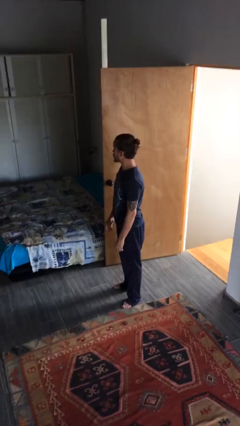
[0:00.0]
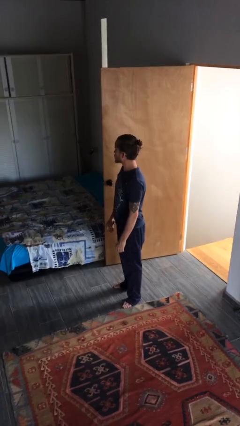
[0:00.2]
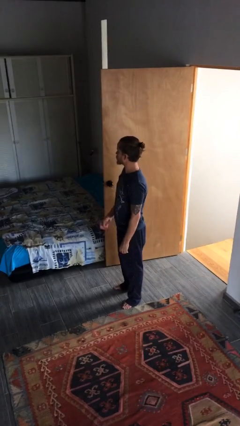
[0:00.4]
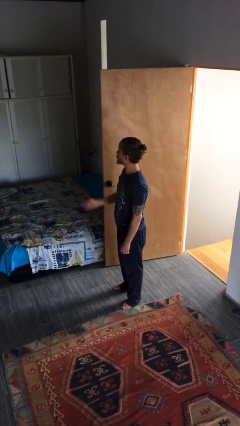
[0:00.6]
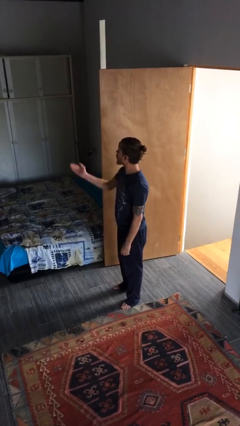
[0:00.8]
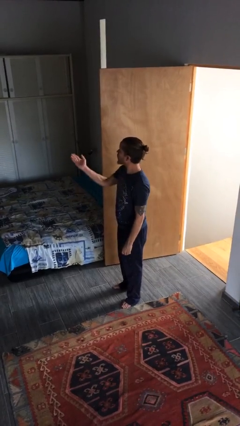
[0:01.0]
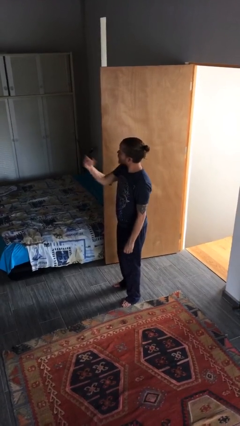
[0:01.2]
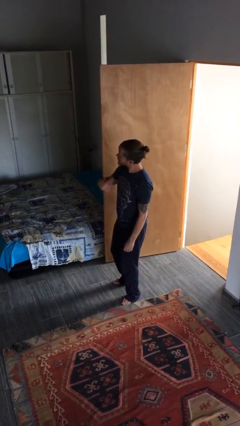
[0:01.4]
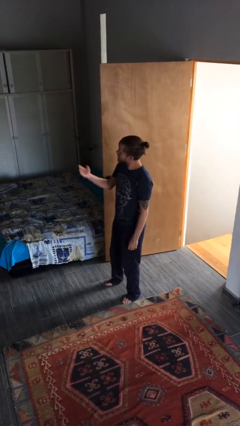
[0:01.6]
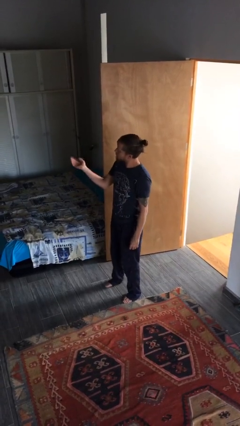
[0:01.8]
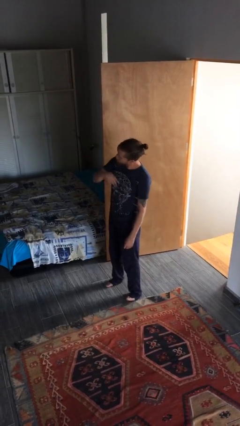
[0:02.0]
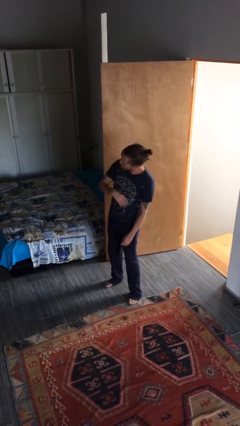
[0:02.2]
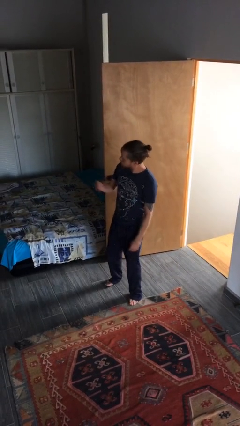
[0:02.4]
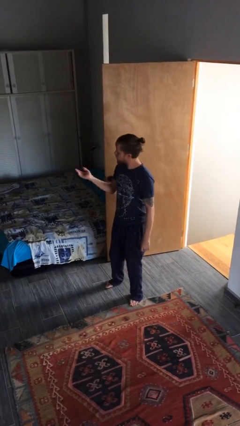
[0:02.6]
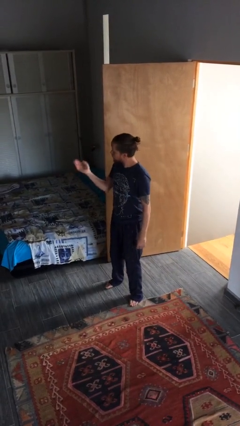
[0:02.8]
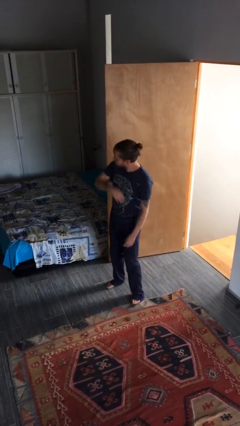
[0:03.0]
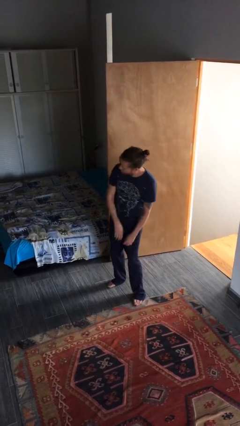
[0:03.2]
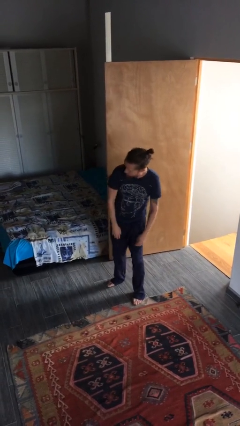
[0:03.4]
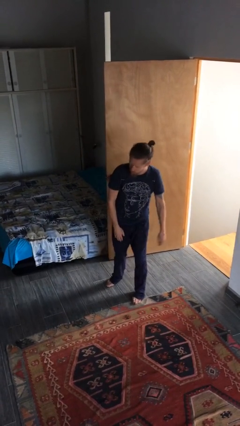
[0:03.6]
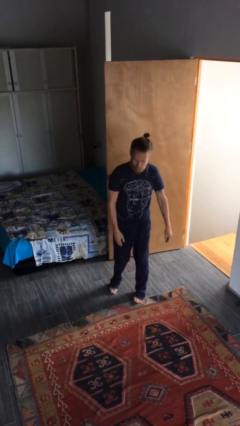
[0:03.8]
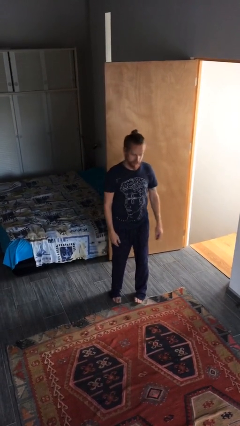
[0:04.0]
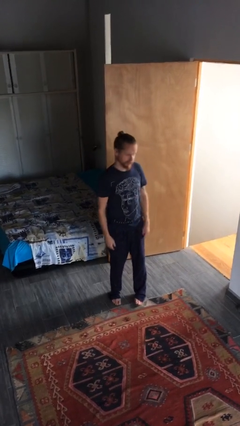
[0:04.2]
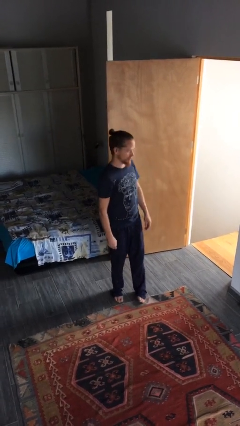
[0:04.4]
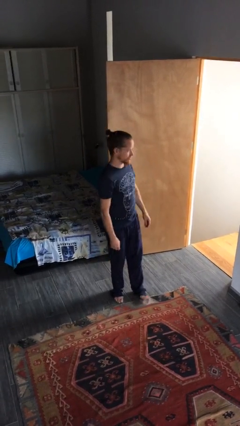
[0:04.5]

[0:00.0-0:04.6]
person gestures come here

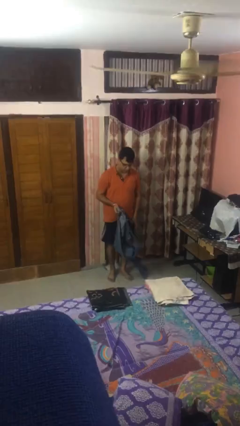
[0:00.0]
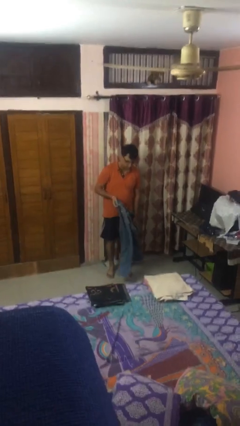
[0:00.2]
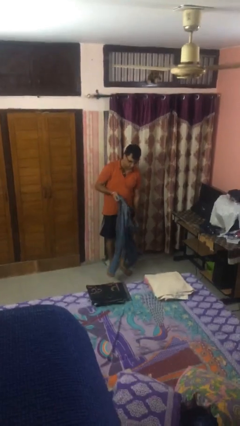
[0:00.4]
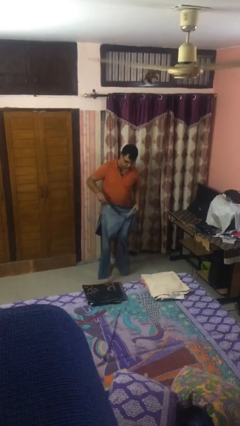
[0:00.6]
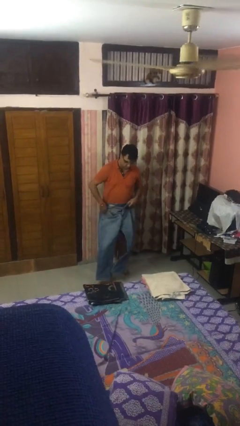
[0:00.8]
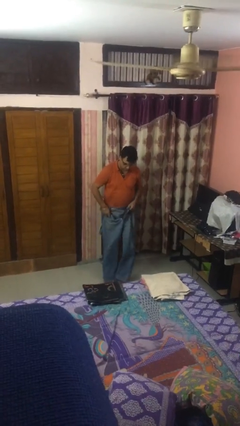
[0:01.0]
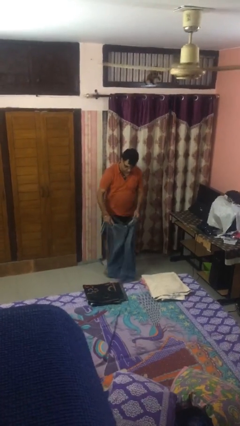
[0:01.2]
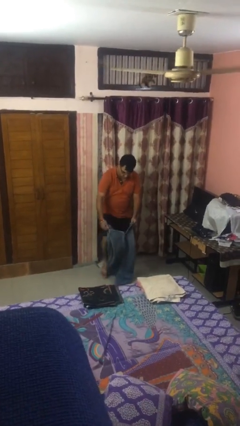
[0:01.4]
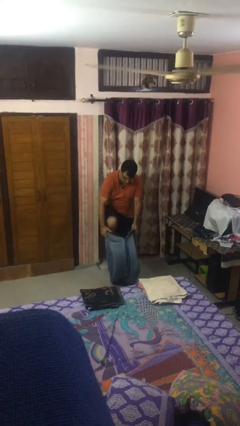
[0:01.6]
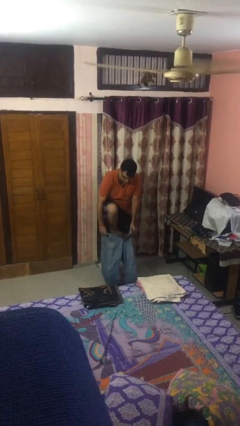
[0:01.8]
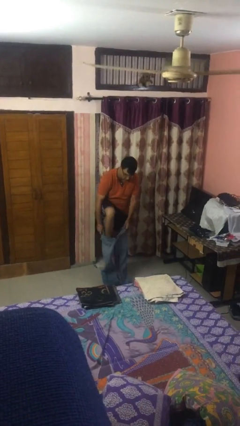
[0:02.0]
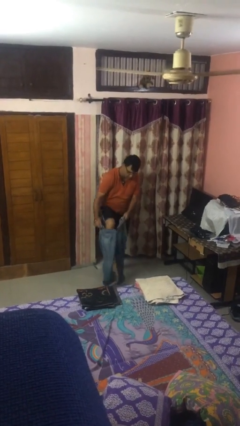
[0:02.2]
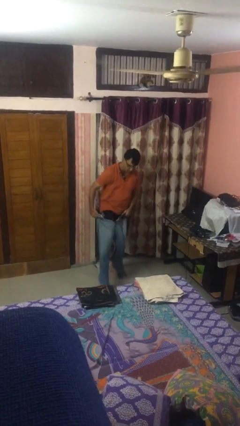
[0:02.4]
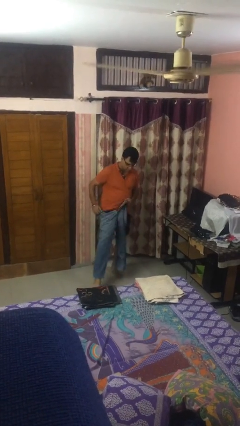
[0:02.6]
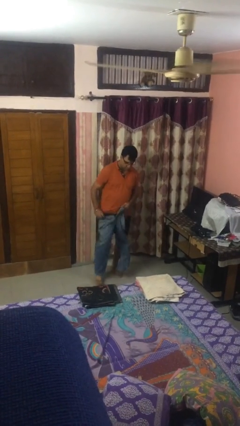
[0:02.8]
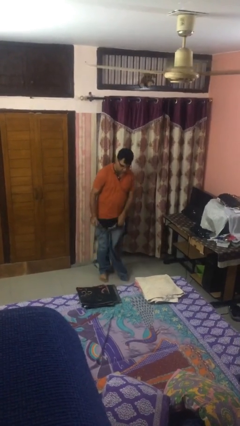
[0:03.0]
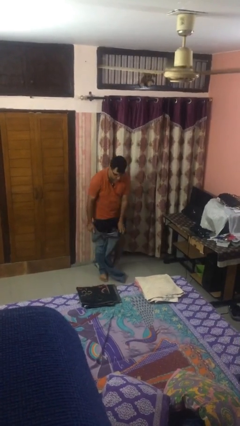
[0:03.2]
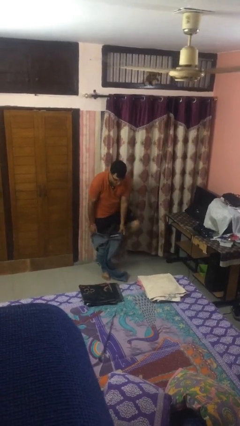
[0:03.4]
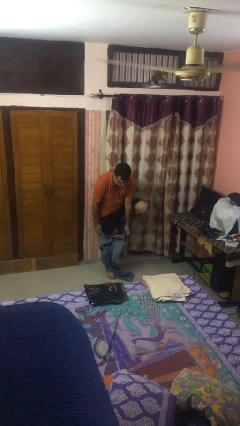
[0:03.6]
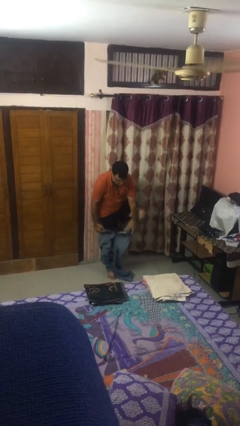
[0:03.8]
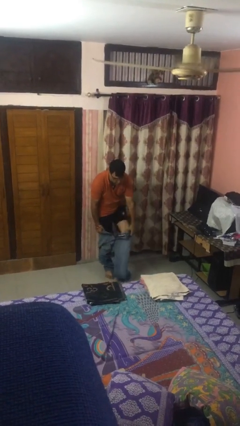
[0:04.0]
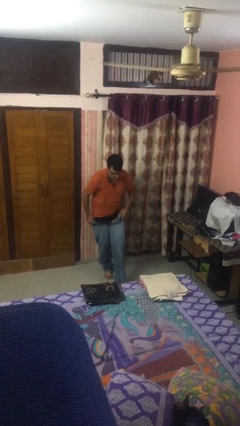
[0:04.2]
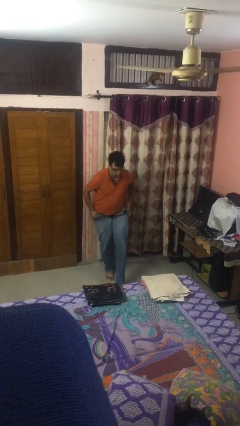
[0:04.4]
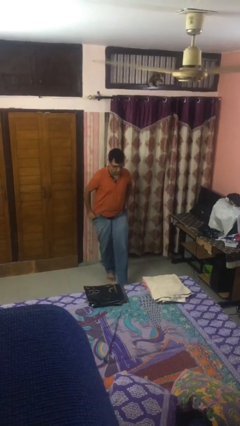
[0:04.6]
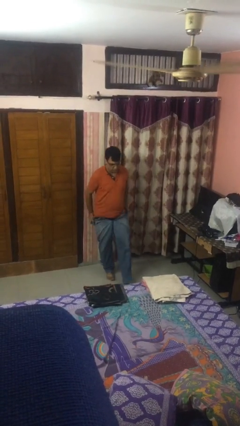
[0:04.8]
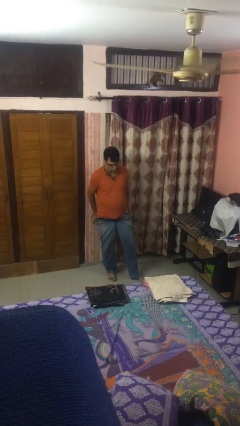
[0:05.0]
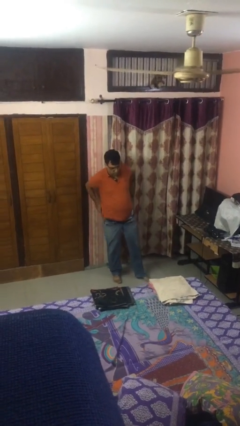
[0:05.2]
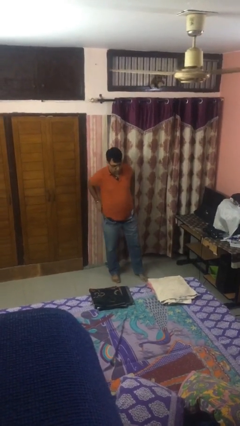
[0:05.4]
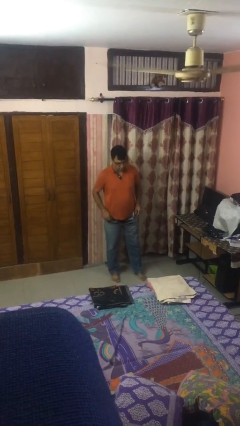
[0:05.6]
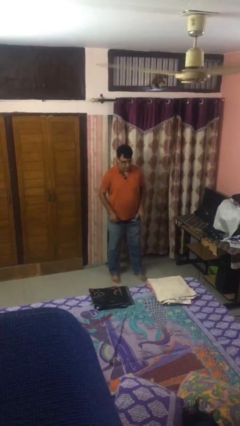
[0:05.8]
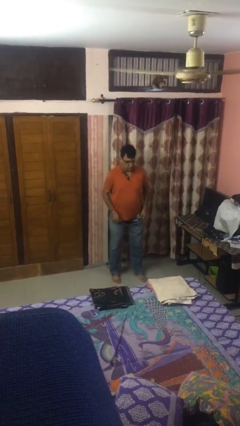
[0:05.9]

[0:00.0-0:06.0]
person puts on pants

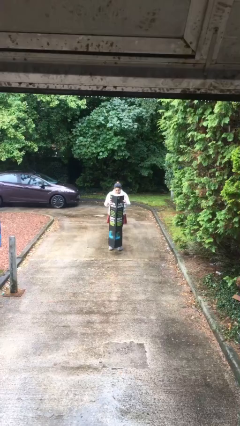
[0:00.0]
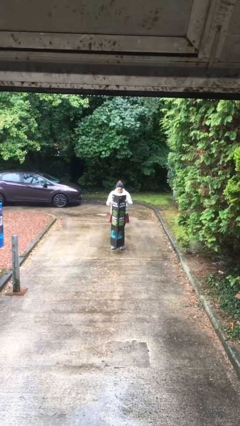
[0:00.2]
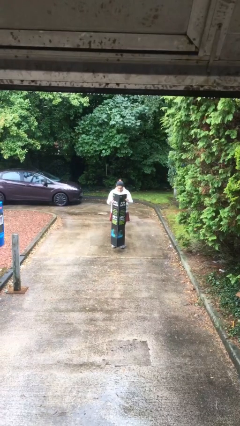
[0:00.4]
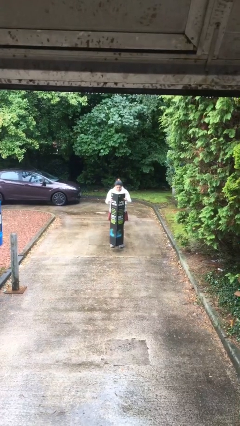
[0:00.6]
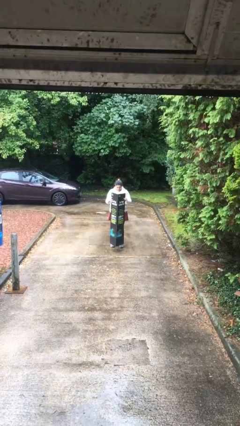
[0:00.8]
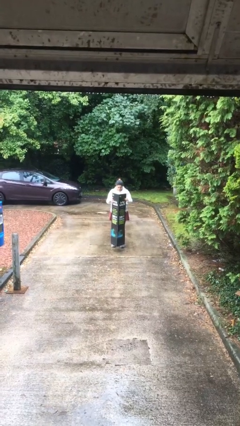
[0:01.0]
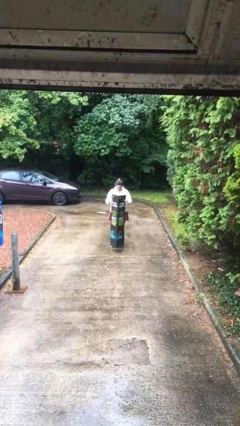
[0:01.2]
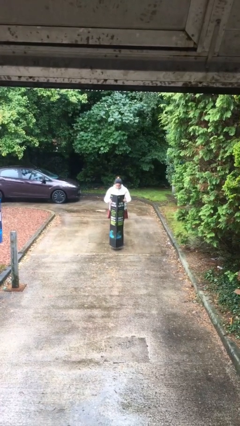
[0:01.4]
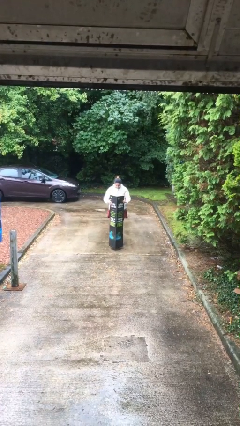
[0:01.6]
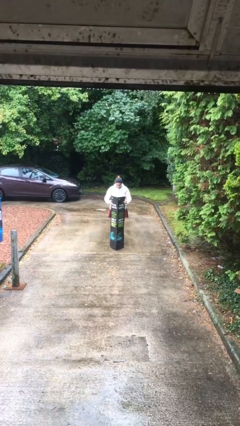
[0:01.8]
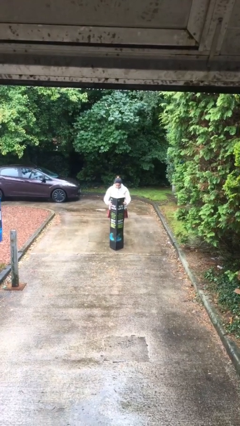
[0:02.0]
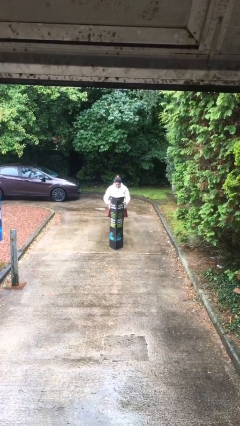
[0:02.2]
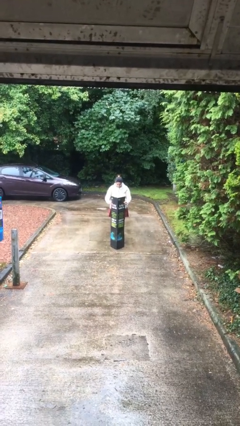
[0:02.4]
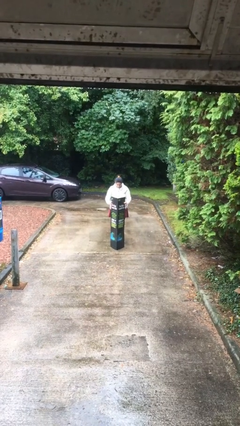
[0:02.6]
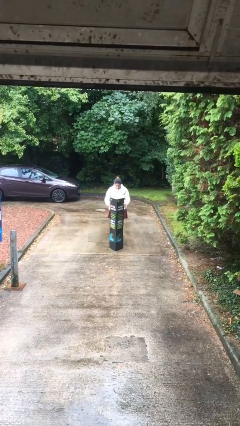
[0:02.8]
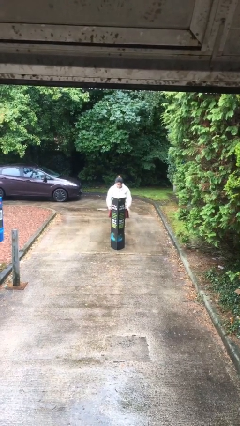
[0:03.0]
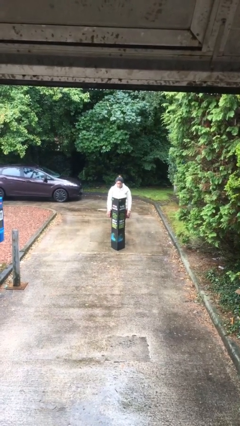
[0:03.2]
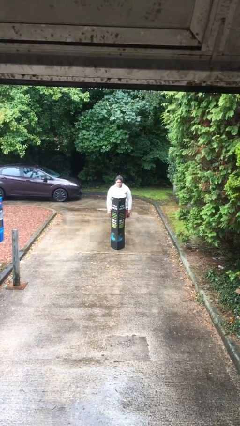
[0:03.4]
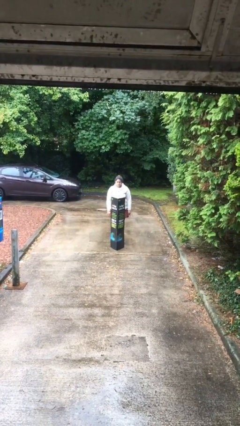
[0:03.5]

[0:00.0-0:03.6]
person puts down object on floor

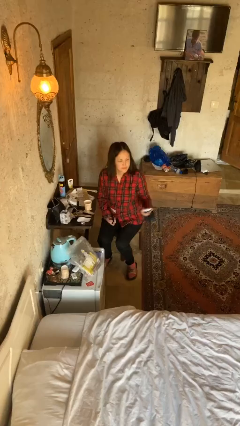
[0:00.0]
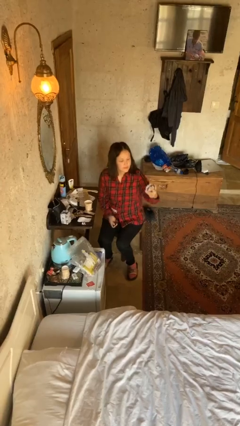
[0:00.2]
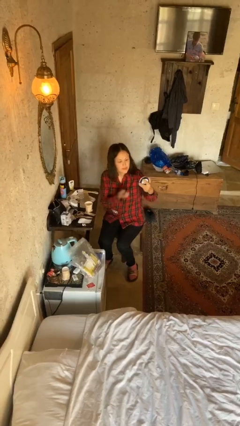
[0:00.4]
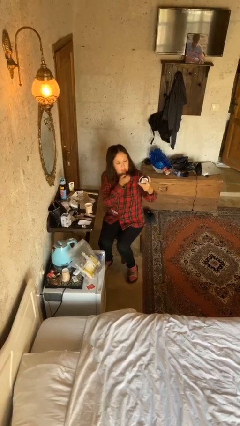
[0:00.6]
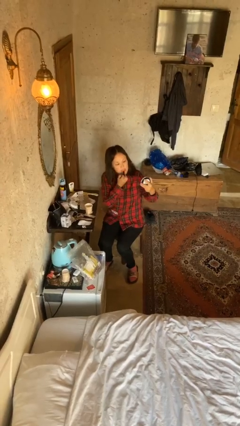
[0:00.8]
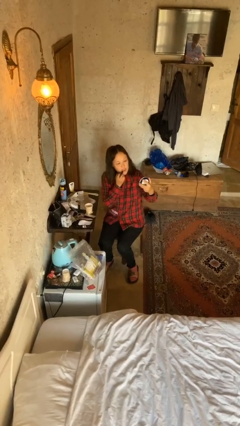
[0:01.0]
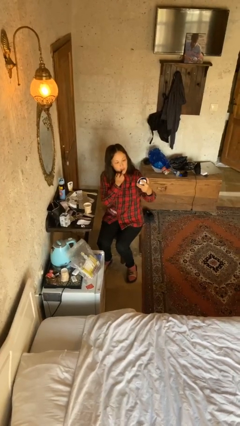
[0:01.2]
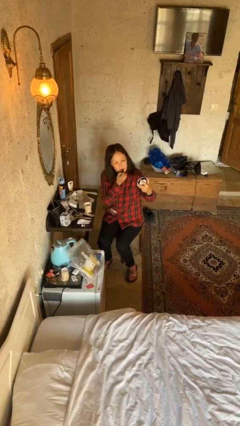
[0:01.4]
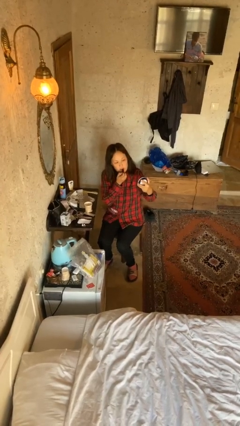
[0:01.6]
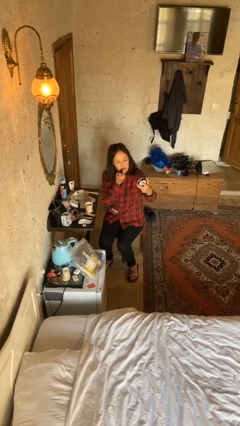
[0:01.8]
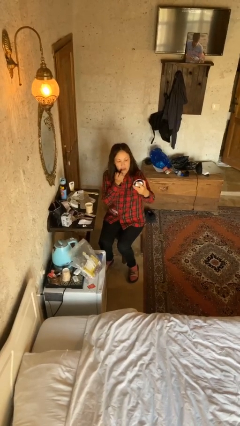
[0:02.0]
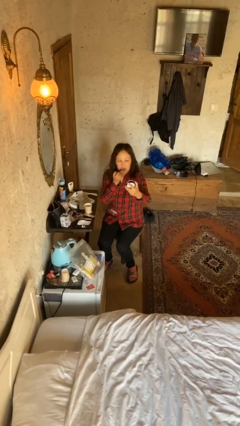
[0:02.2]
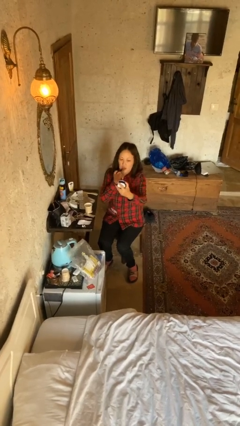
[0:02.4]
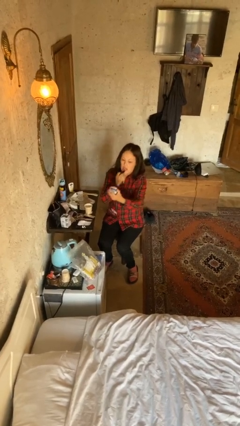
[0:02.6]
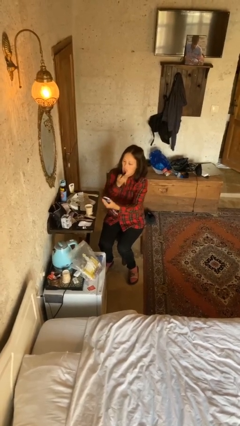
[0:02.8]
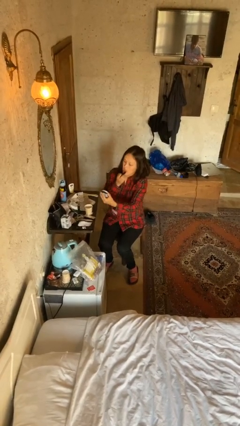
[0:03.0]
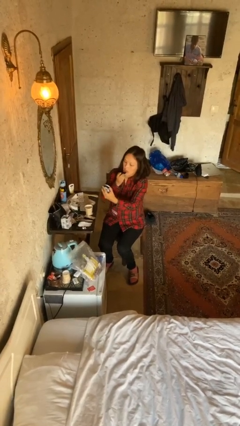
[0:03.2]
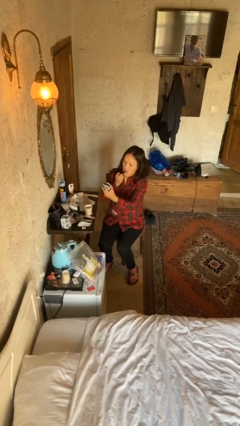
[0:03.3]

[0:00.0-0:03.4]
person applies lip makeup
